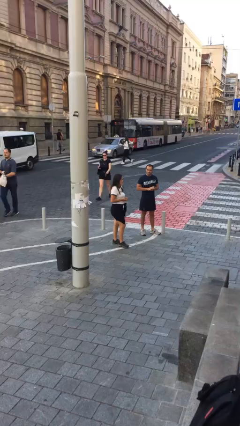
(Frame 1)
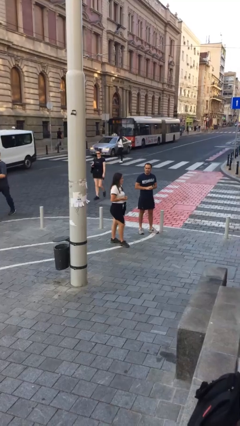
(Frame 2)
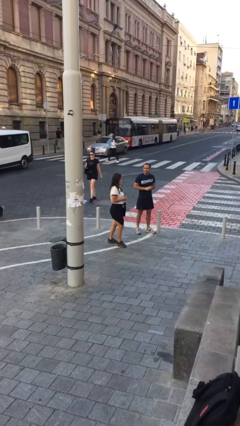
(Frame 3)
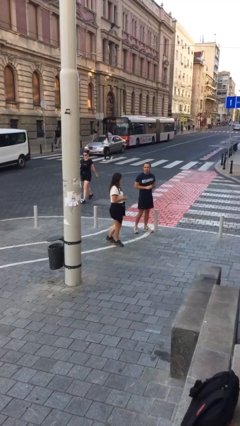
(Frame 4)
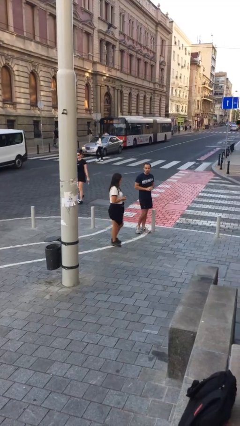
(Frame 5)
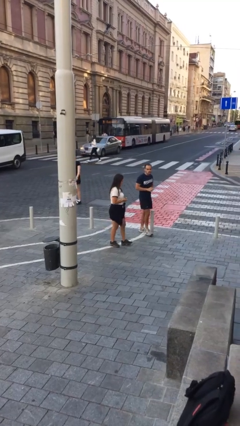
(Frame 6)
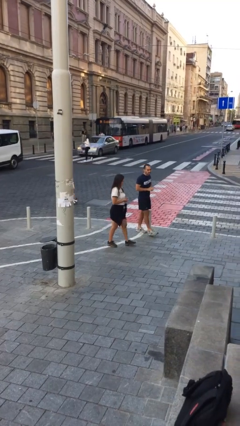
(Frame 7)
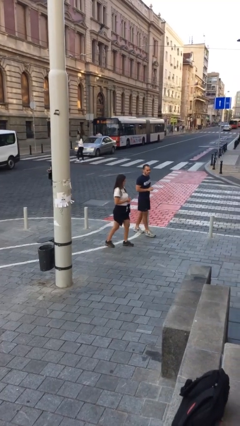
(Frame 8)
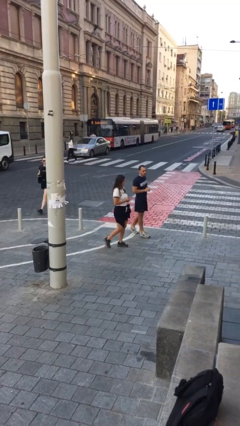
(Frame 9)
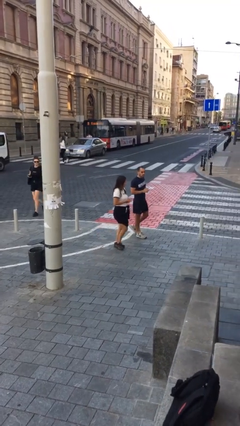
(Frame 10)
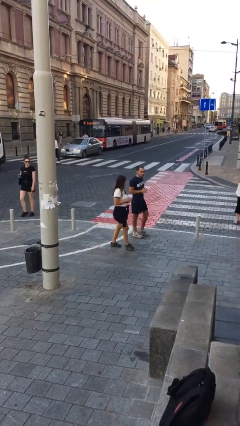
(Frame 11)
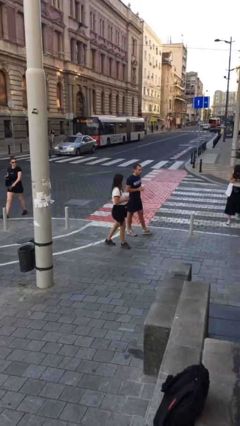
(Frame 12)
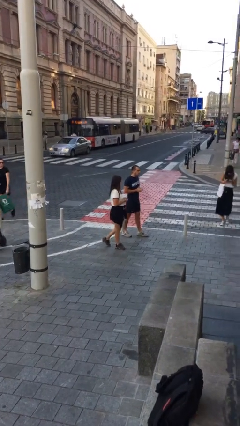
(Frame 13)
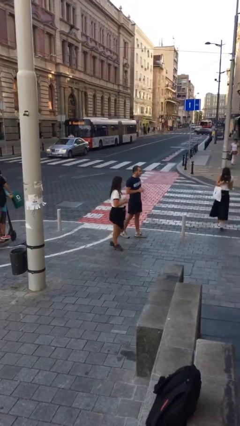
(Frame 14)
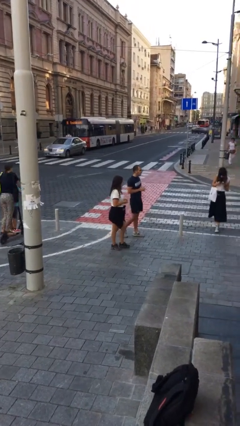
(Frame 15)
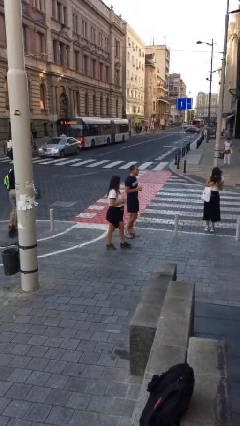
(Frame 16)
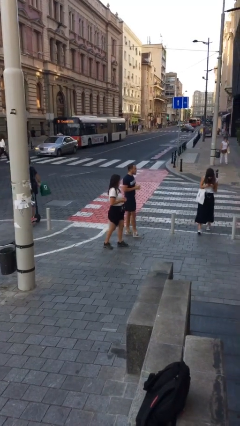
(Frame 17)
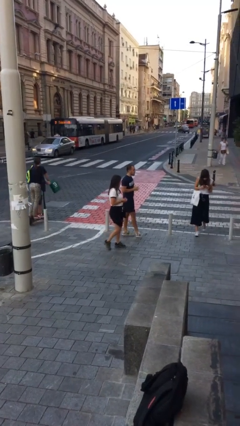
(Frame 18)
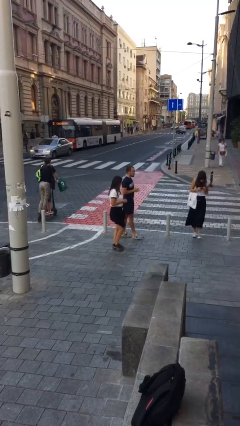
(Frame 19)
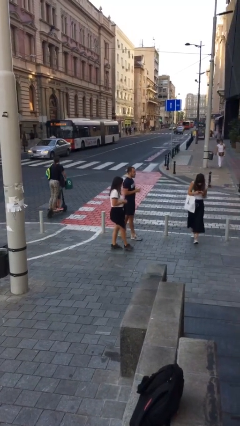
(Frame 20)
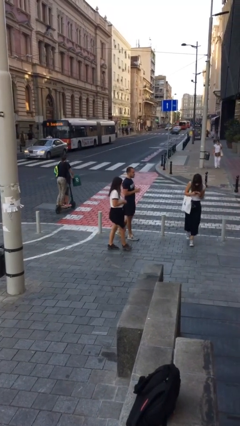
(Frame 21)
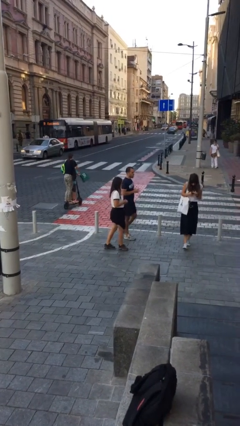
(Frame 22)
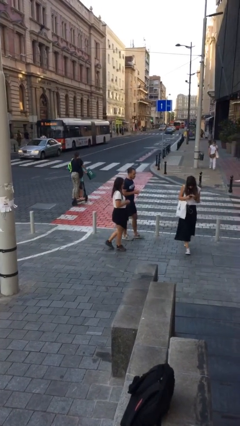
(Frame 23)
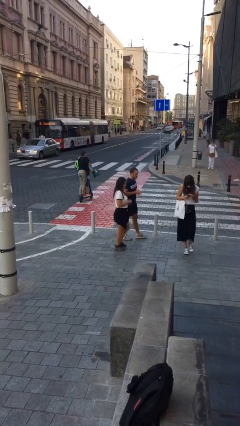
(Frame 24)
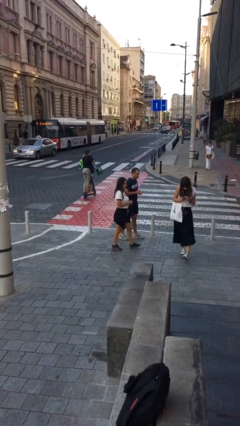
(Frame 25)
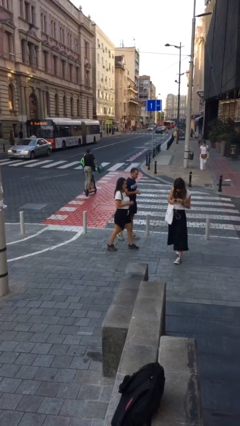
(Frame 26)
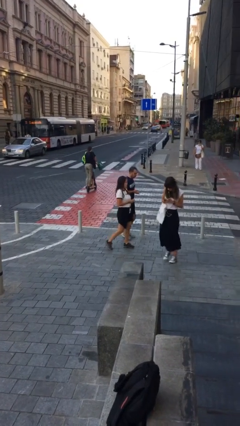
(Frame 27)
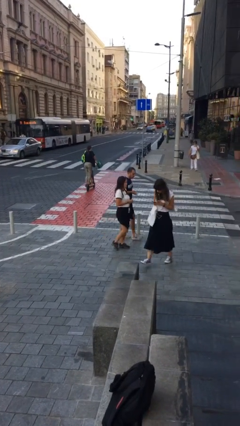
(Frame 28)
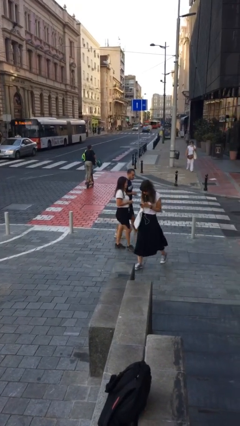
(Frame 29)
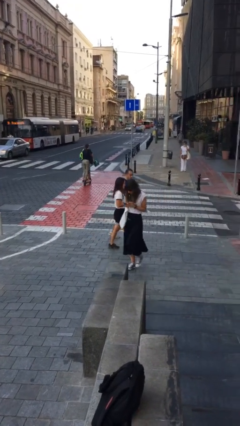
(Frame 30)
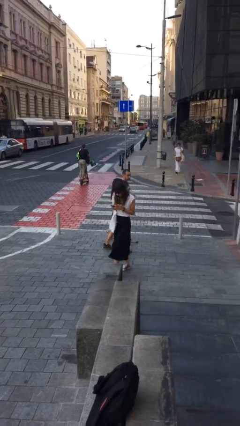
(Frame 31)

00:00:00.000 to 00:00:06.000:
person talks to person

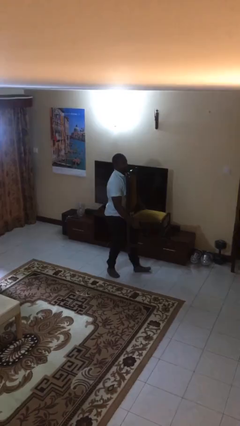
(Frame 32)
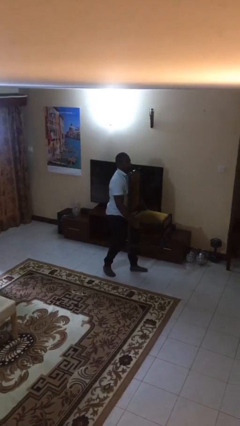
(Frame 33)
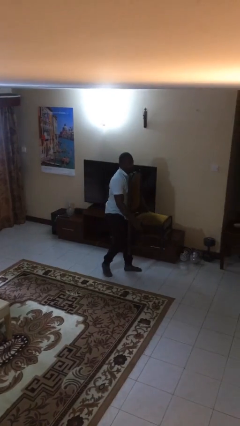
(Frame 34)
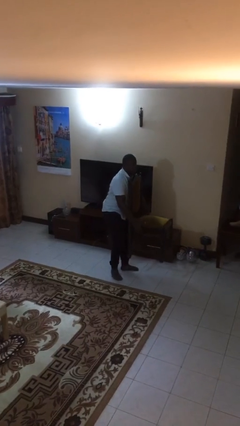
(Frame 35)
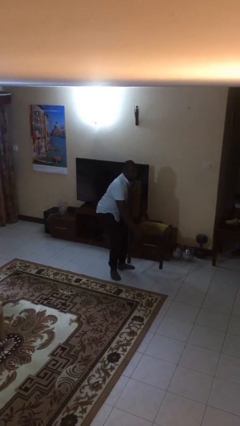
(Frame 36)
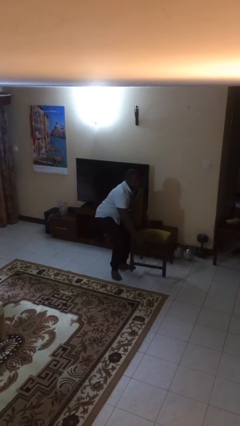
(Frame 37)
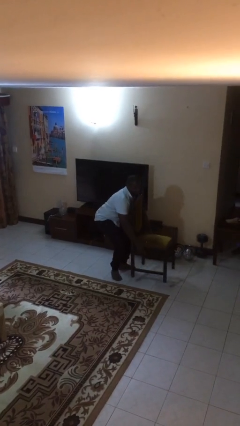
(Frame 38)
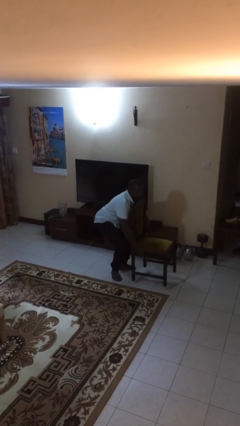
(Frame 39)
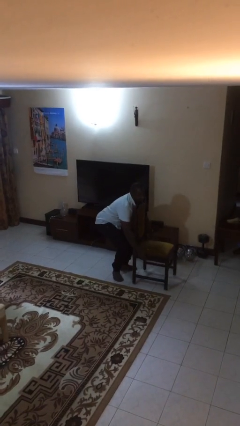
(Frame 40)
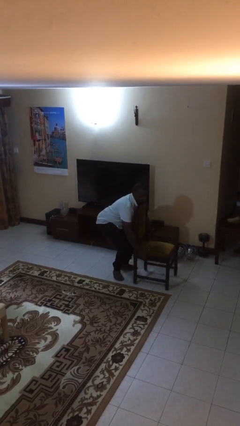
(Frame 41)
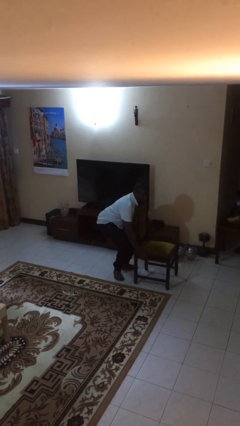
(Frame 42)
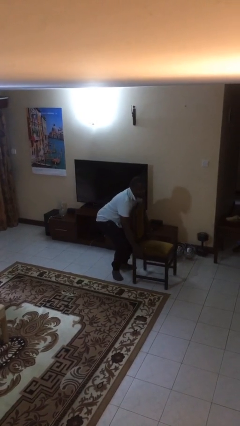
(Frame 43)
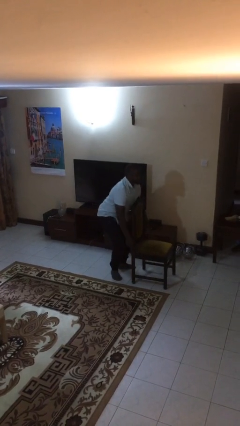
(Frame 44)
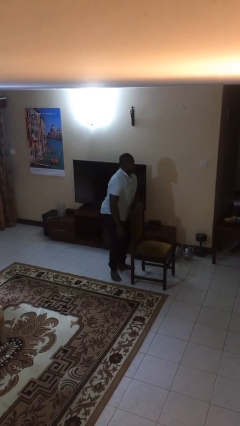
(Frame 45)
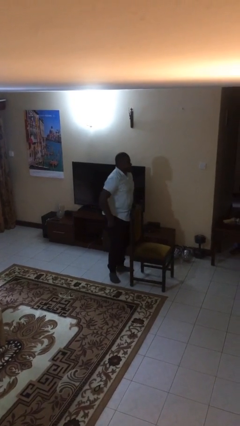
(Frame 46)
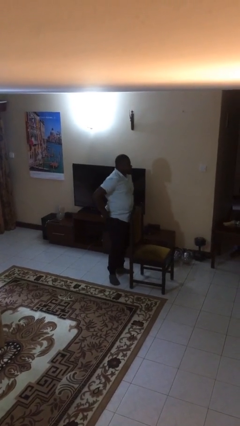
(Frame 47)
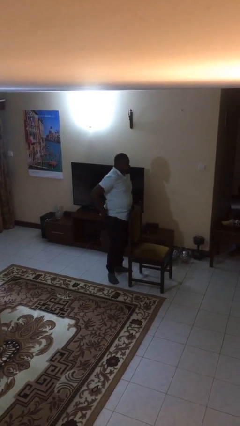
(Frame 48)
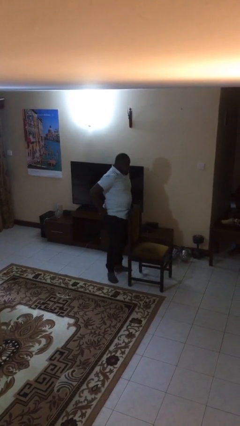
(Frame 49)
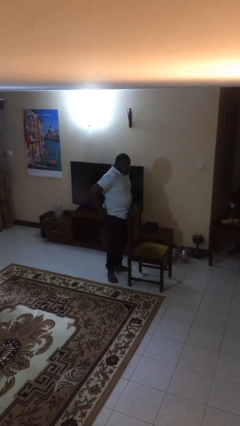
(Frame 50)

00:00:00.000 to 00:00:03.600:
person puts down object on floor

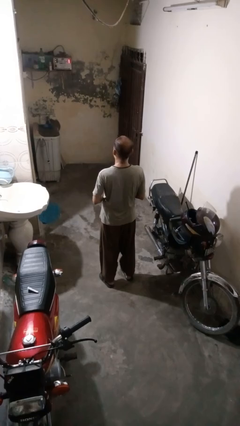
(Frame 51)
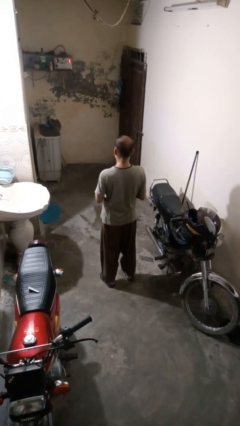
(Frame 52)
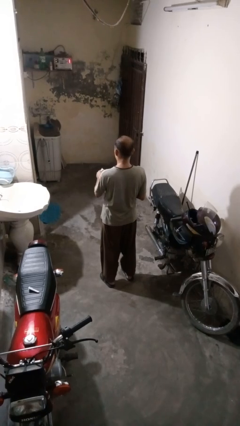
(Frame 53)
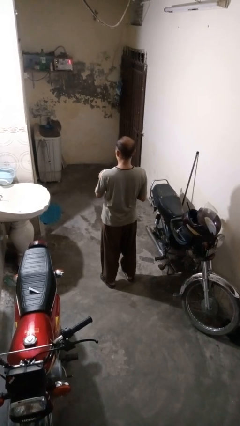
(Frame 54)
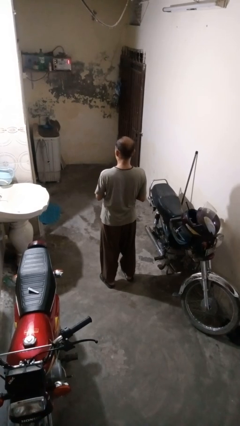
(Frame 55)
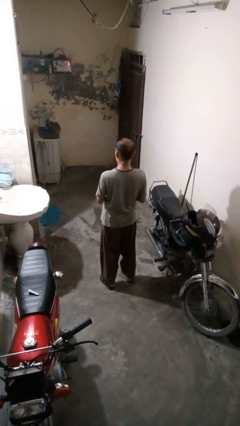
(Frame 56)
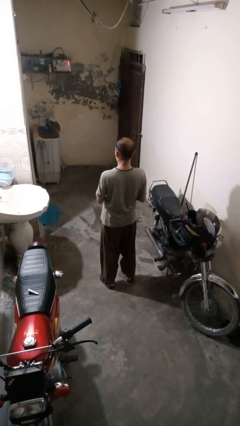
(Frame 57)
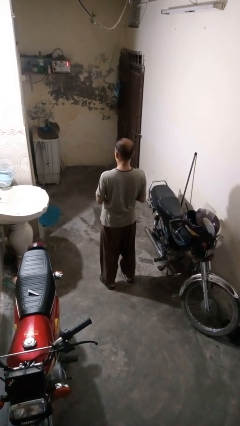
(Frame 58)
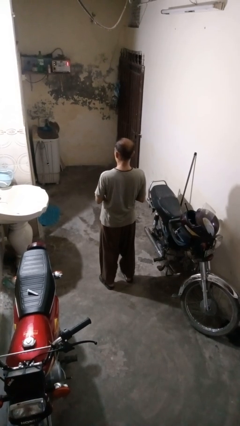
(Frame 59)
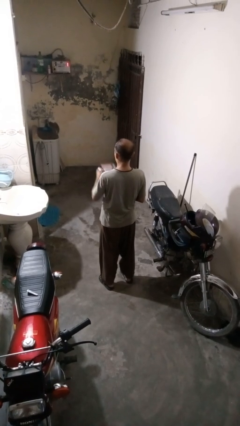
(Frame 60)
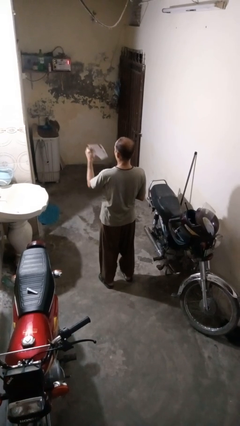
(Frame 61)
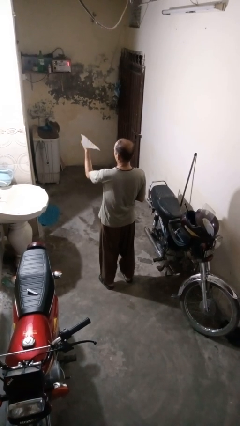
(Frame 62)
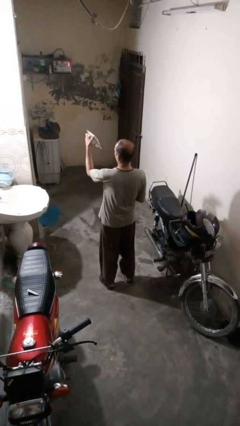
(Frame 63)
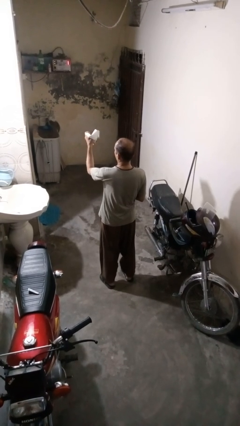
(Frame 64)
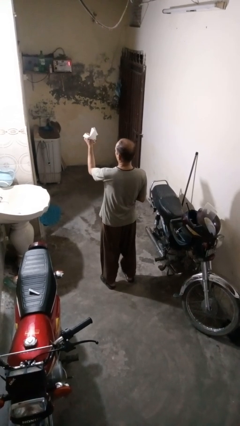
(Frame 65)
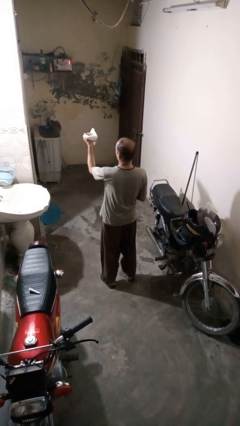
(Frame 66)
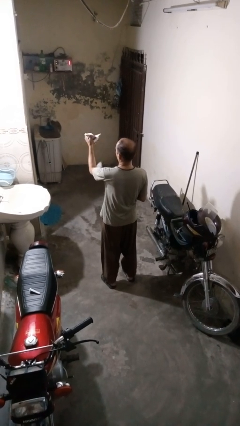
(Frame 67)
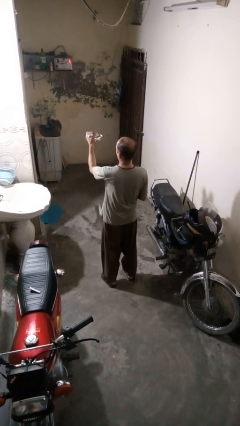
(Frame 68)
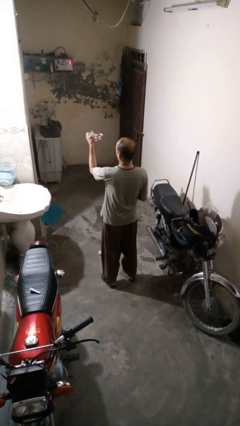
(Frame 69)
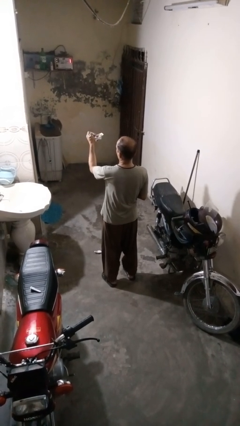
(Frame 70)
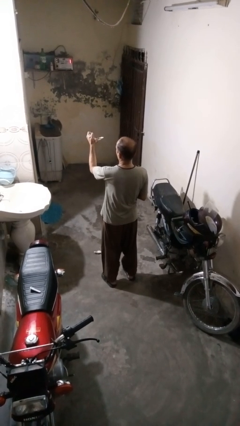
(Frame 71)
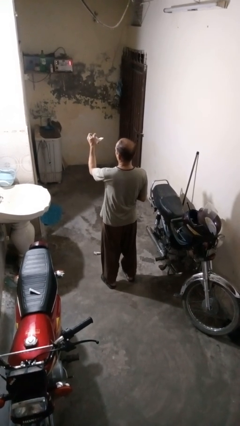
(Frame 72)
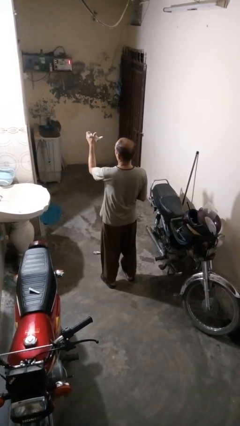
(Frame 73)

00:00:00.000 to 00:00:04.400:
person crumples paper

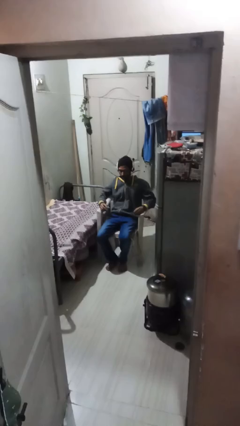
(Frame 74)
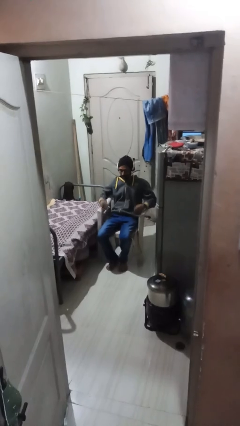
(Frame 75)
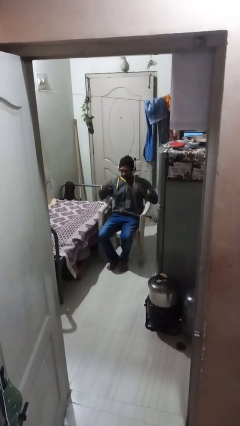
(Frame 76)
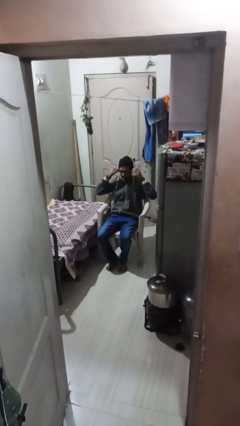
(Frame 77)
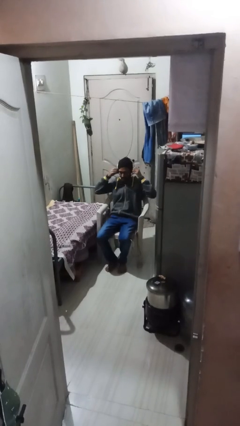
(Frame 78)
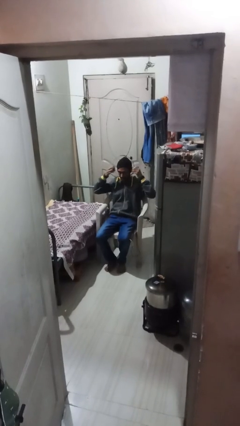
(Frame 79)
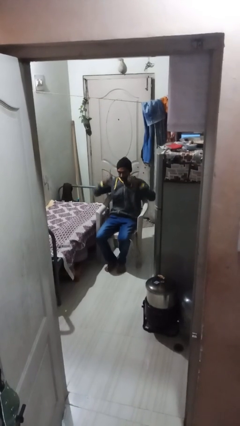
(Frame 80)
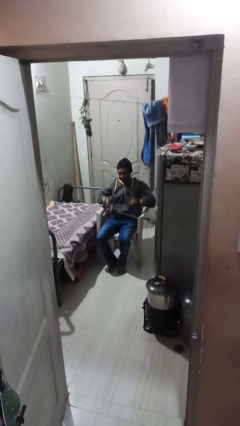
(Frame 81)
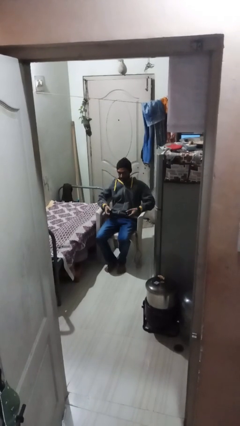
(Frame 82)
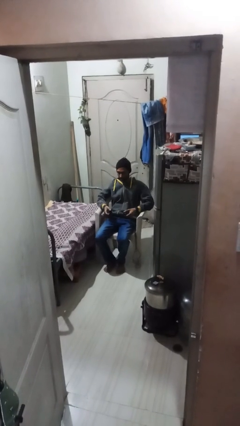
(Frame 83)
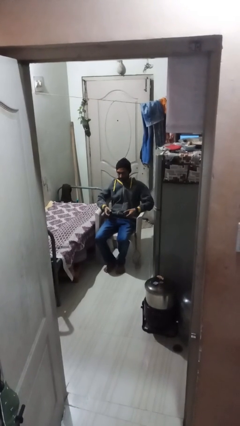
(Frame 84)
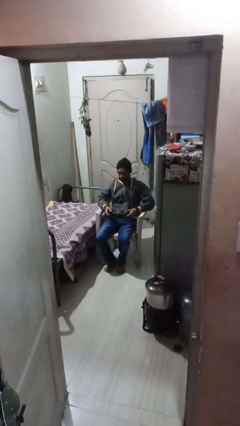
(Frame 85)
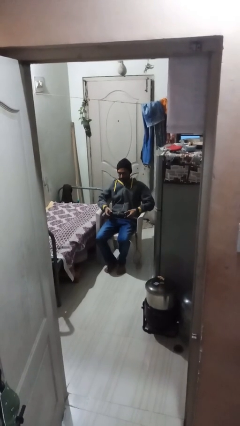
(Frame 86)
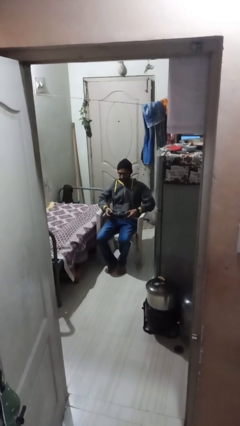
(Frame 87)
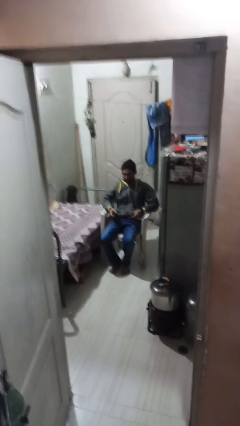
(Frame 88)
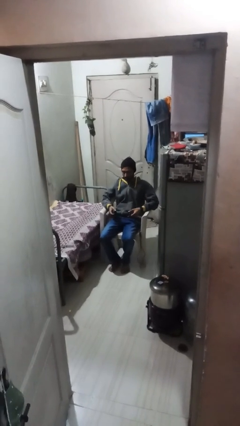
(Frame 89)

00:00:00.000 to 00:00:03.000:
person takes off headphones

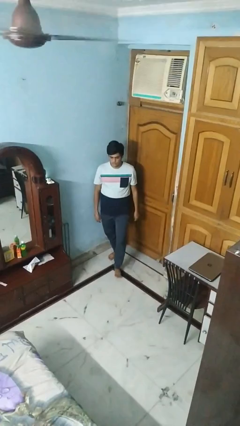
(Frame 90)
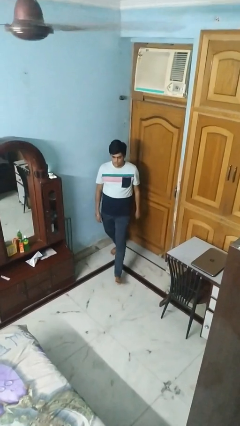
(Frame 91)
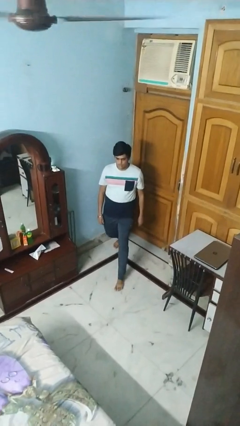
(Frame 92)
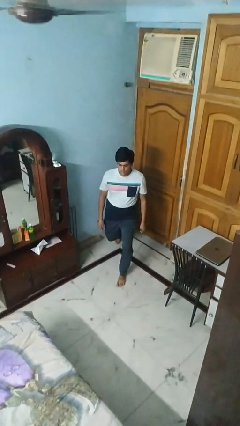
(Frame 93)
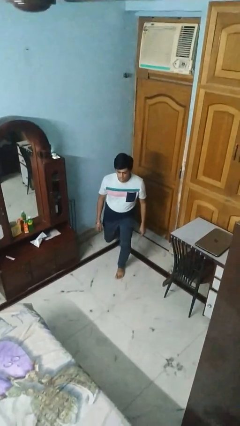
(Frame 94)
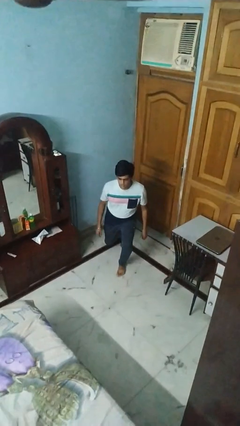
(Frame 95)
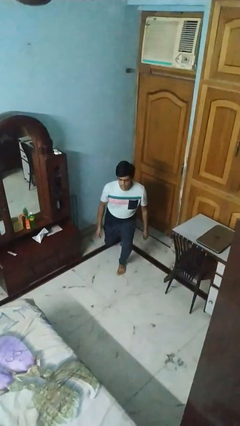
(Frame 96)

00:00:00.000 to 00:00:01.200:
person exercises with lunges
